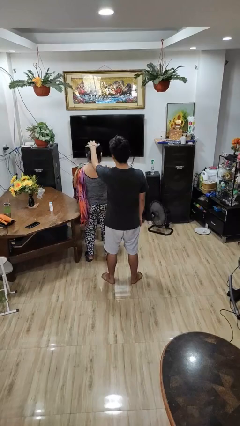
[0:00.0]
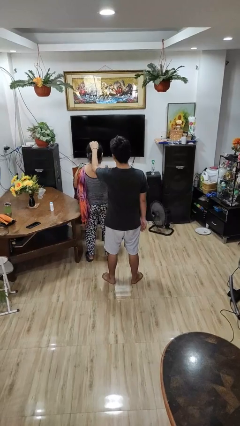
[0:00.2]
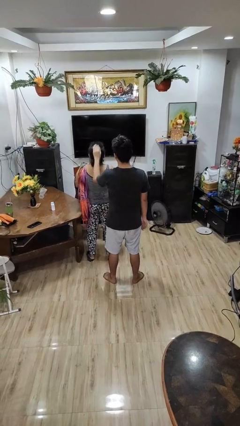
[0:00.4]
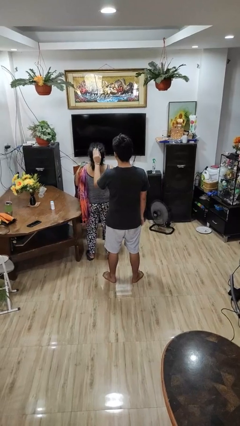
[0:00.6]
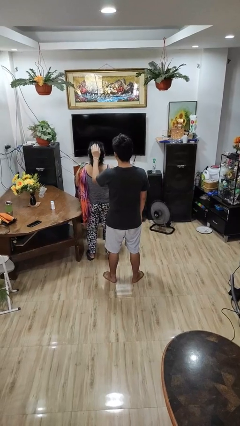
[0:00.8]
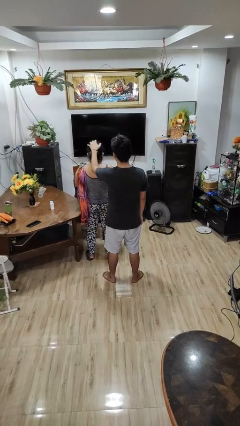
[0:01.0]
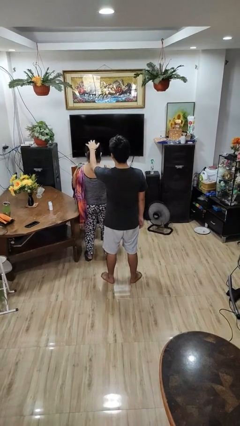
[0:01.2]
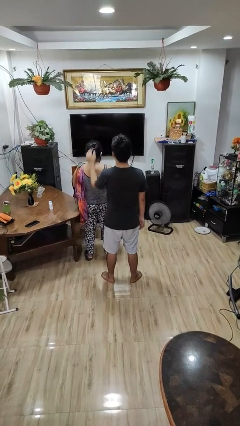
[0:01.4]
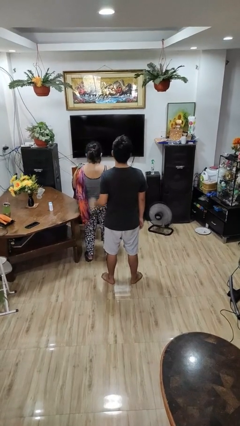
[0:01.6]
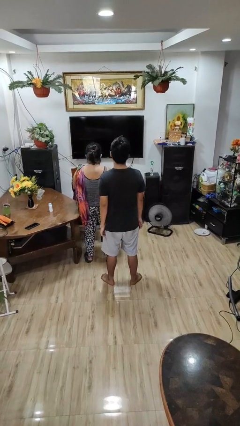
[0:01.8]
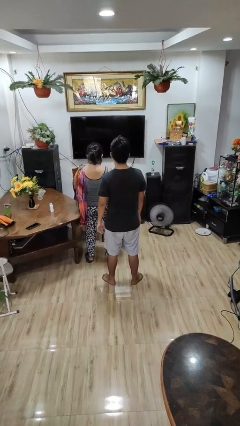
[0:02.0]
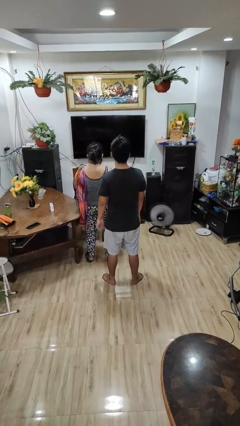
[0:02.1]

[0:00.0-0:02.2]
person grabs person by hair

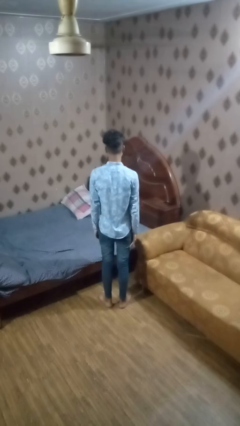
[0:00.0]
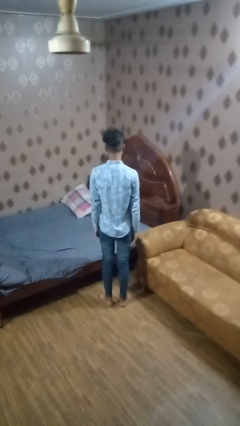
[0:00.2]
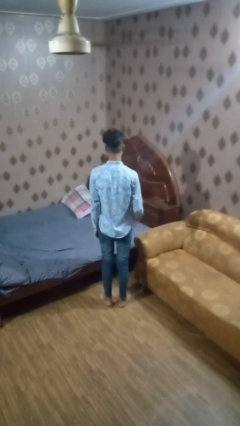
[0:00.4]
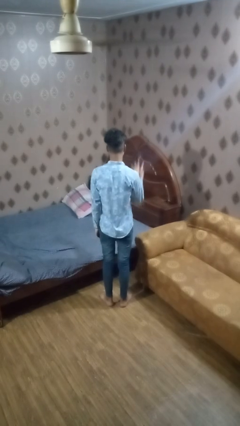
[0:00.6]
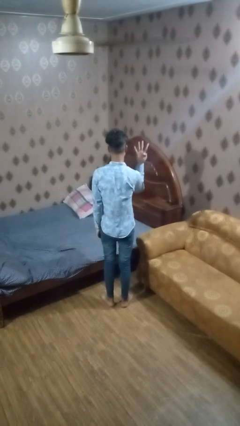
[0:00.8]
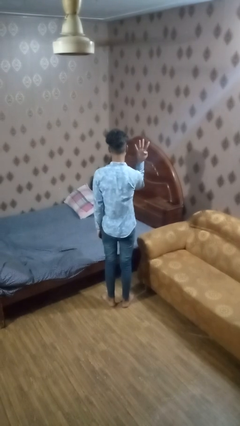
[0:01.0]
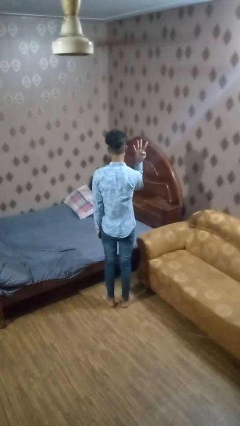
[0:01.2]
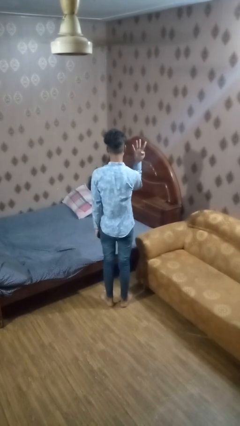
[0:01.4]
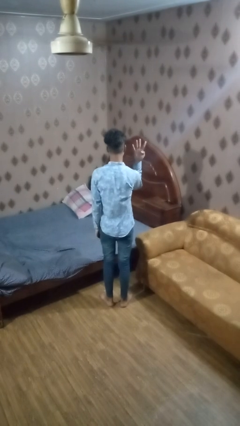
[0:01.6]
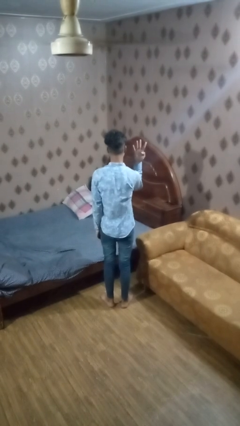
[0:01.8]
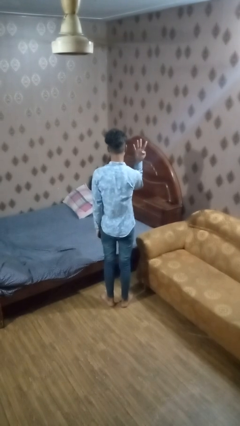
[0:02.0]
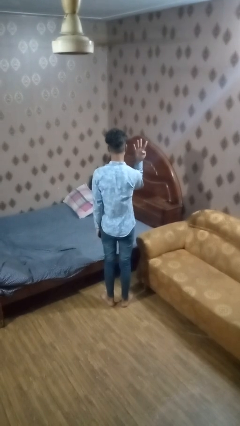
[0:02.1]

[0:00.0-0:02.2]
person gestures number four

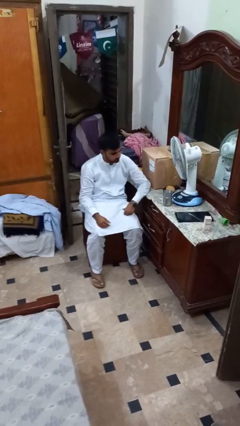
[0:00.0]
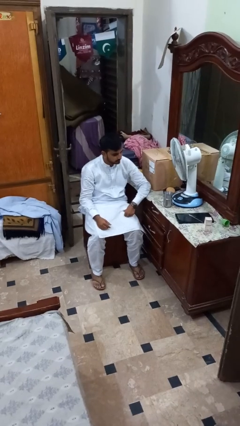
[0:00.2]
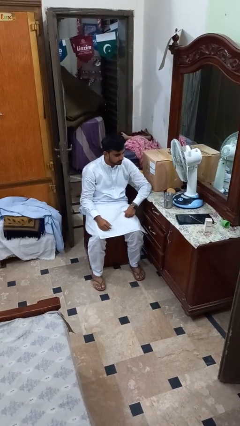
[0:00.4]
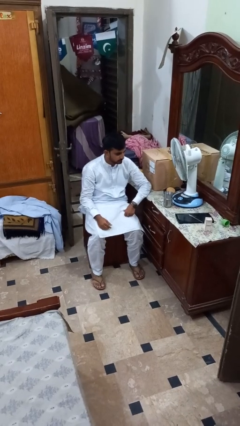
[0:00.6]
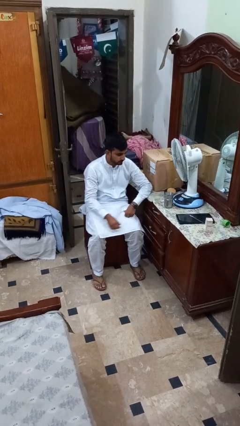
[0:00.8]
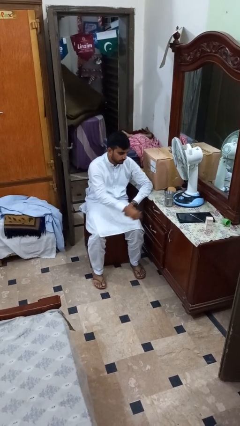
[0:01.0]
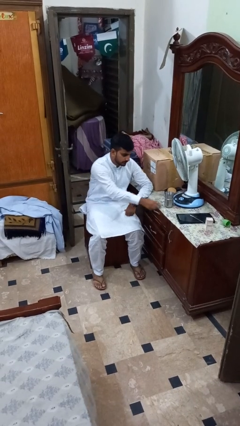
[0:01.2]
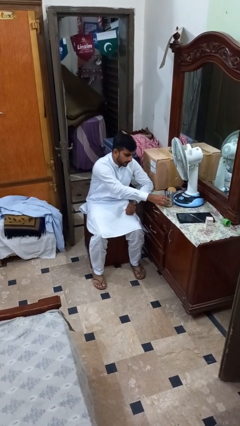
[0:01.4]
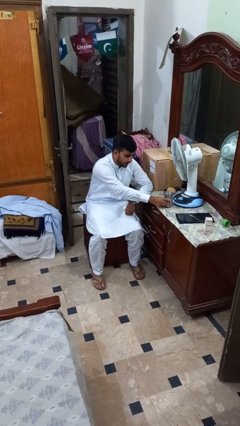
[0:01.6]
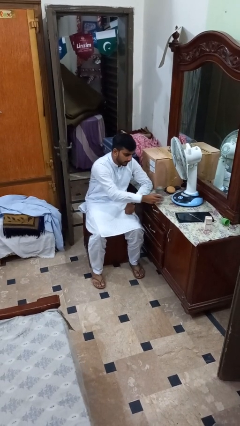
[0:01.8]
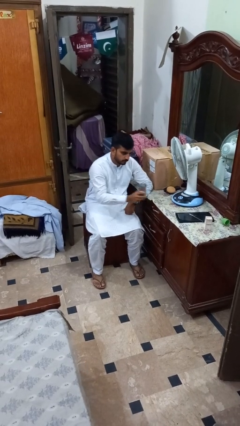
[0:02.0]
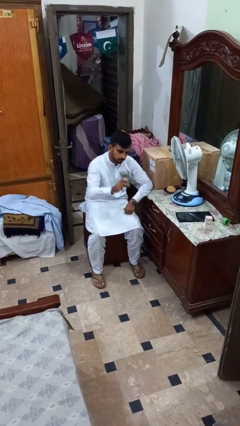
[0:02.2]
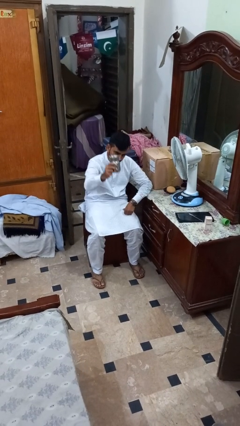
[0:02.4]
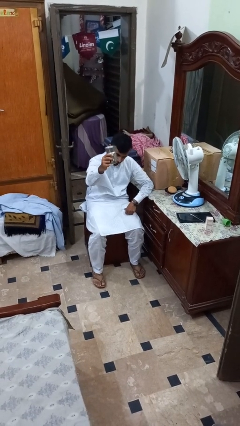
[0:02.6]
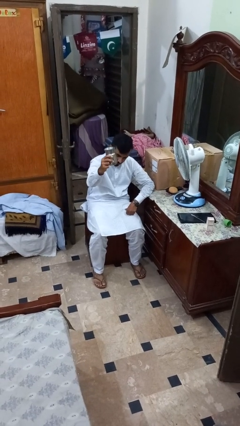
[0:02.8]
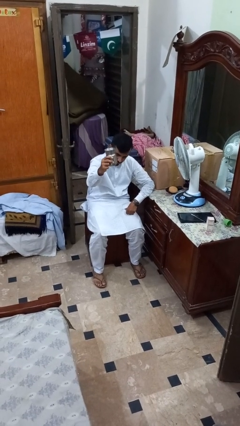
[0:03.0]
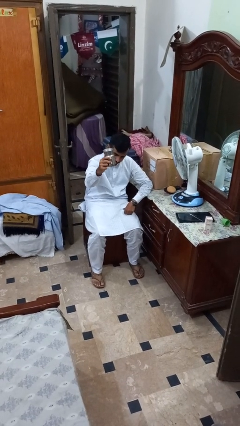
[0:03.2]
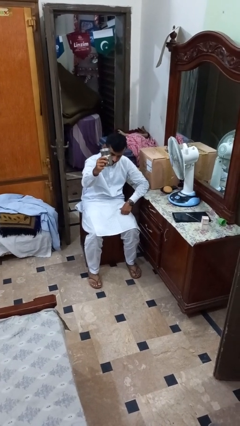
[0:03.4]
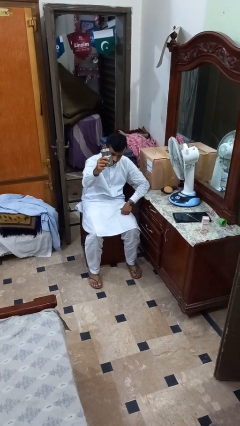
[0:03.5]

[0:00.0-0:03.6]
person picks up object from table

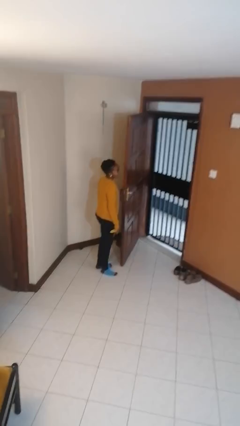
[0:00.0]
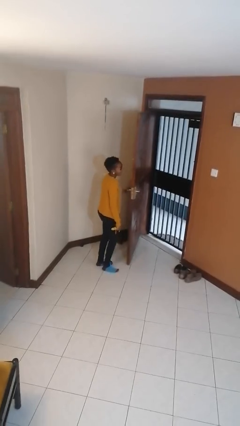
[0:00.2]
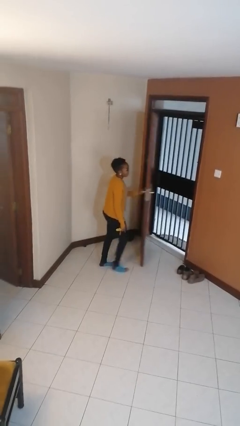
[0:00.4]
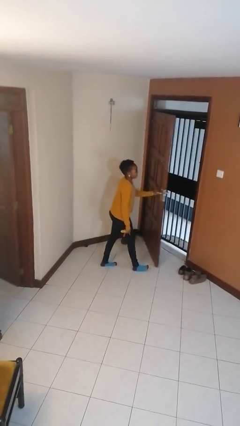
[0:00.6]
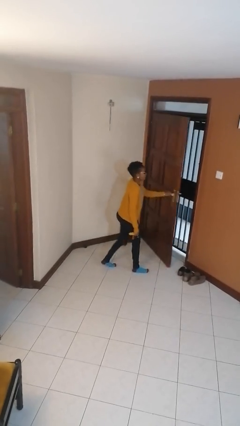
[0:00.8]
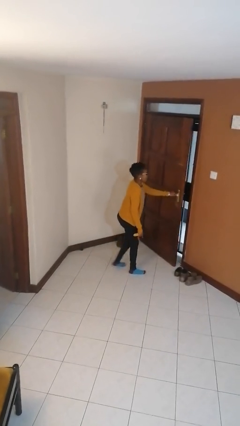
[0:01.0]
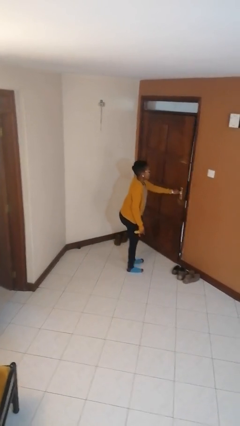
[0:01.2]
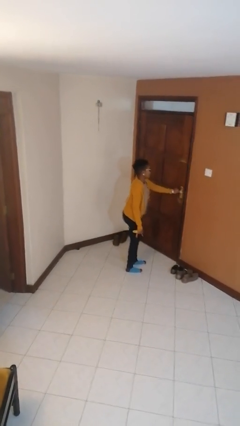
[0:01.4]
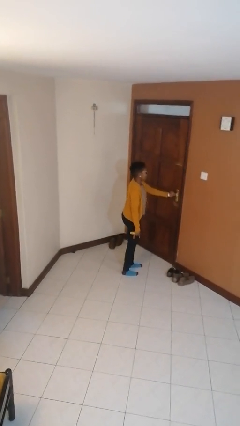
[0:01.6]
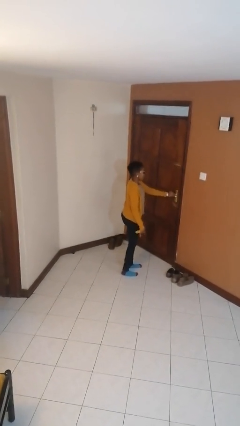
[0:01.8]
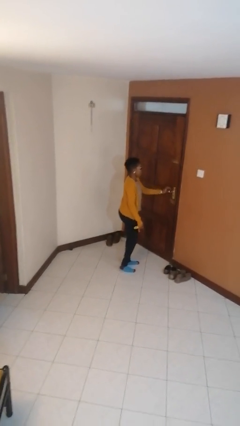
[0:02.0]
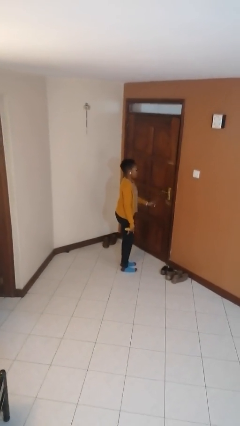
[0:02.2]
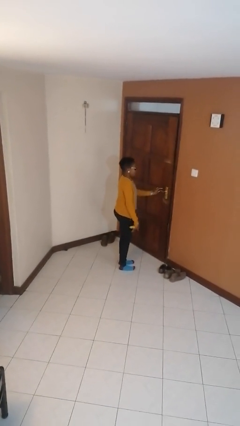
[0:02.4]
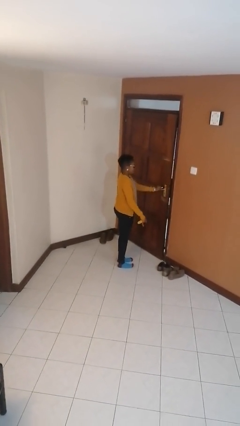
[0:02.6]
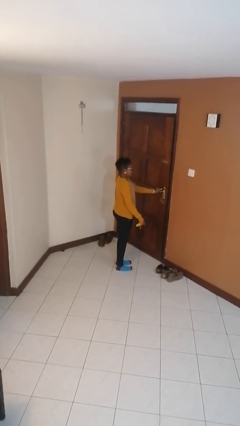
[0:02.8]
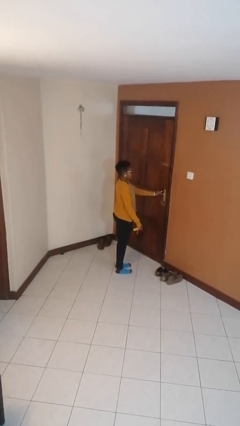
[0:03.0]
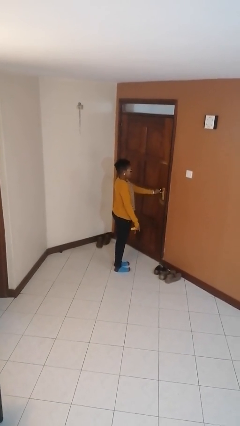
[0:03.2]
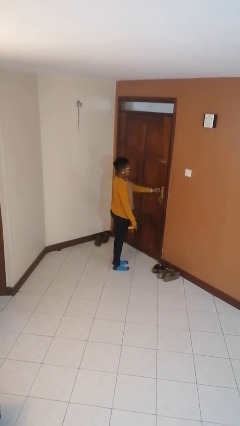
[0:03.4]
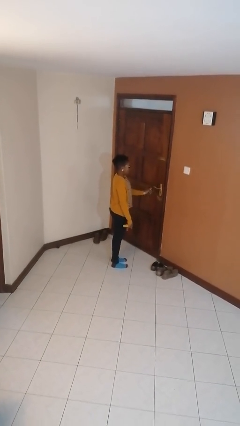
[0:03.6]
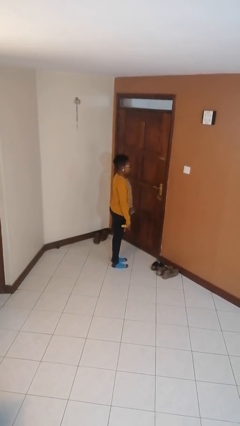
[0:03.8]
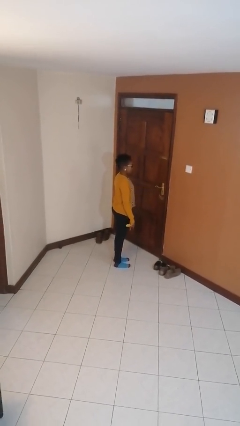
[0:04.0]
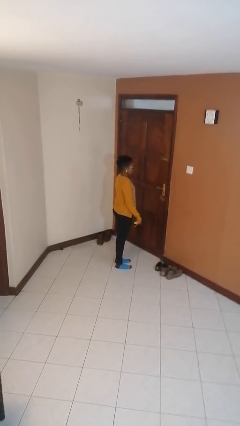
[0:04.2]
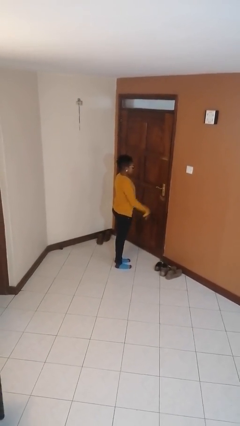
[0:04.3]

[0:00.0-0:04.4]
person closes facility door

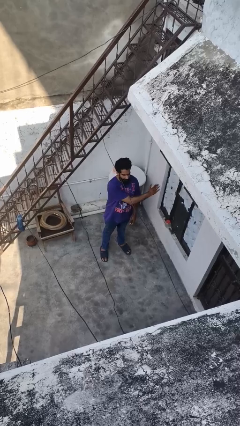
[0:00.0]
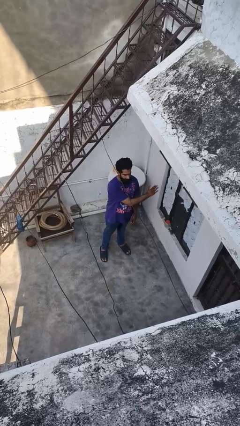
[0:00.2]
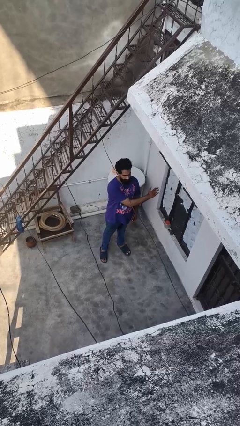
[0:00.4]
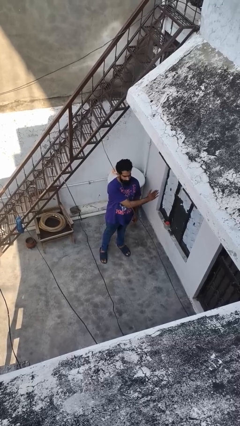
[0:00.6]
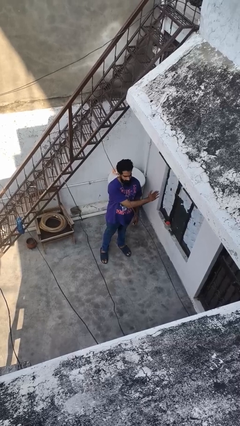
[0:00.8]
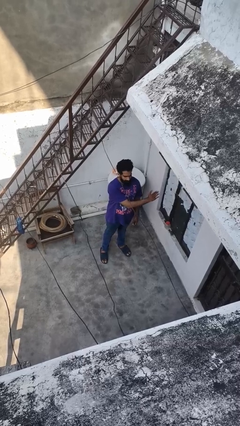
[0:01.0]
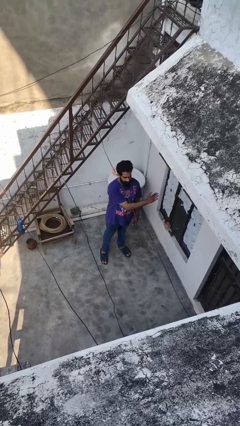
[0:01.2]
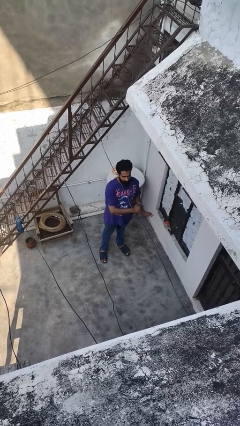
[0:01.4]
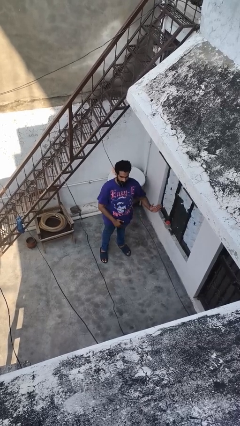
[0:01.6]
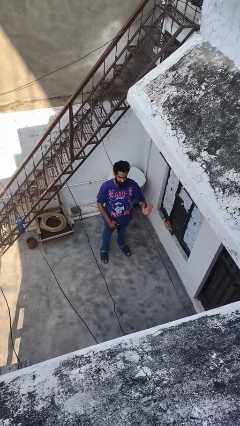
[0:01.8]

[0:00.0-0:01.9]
person gestures swipe left

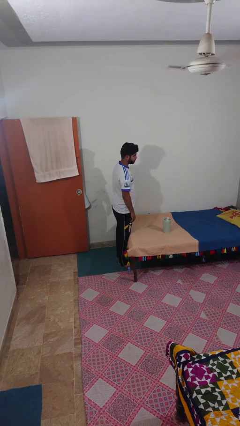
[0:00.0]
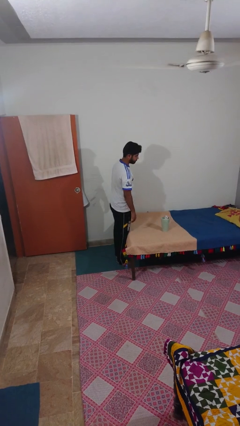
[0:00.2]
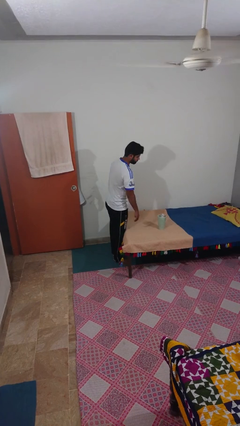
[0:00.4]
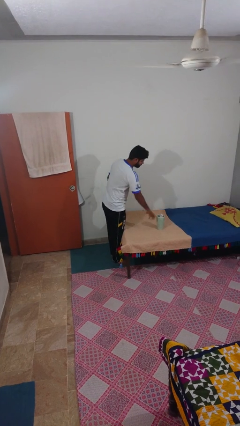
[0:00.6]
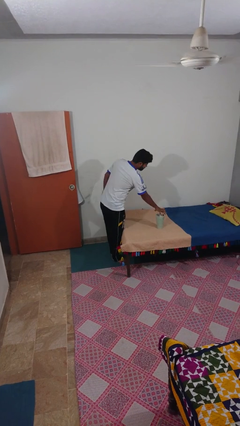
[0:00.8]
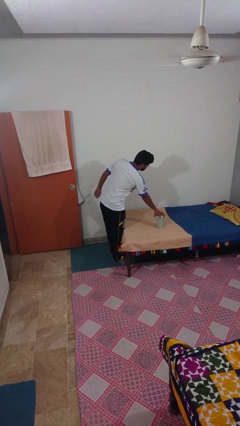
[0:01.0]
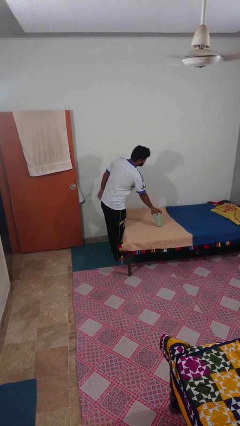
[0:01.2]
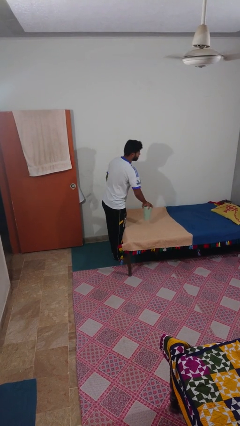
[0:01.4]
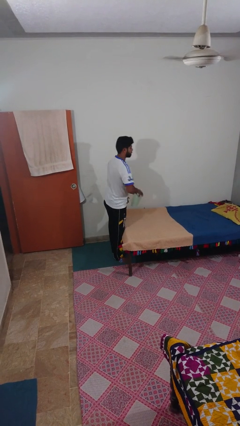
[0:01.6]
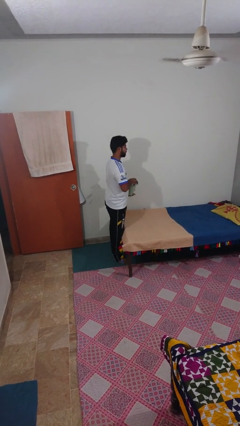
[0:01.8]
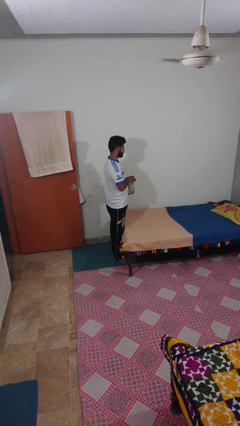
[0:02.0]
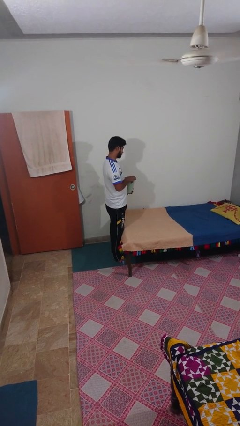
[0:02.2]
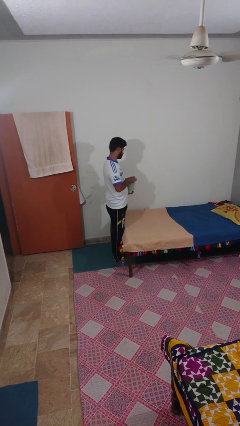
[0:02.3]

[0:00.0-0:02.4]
person picks up object from bed

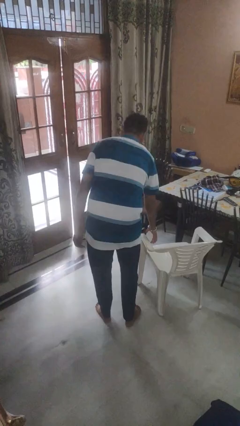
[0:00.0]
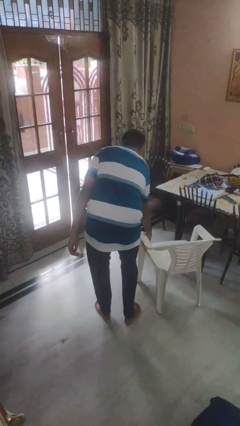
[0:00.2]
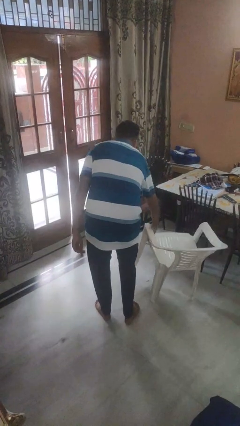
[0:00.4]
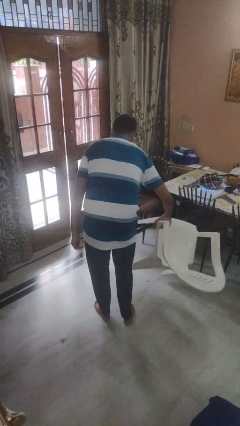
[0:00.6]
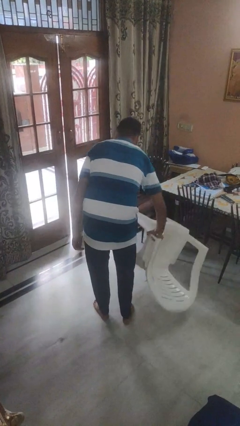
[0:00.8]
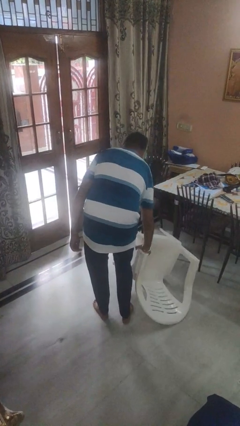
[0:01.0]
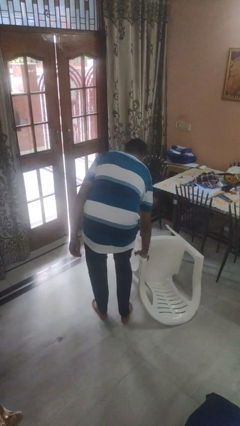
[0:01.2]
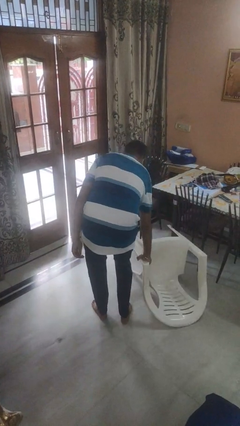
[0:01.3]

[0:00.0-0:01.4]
person knocks over furniture
